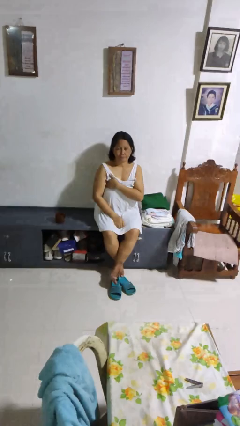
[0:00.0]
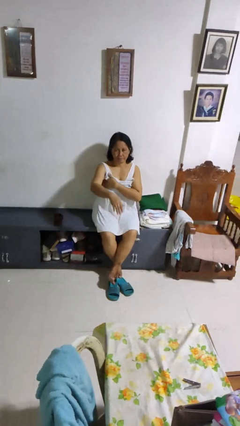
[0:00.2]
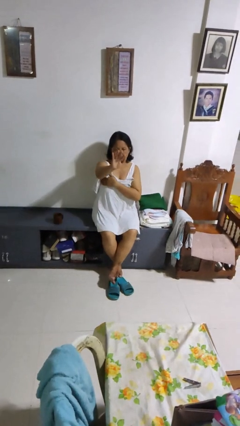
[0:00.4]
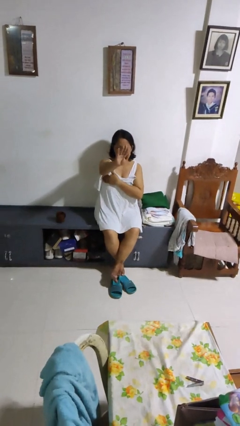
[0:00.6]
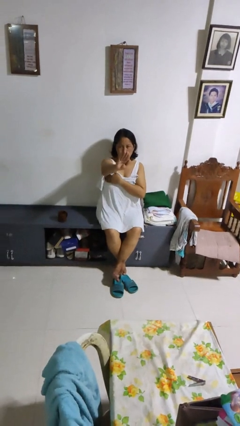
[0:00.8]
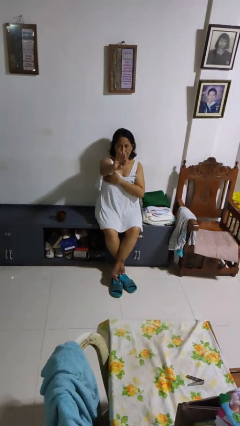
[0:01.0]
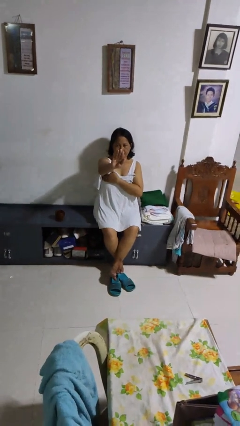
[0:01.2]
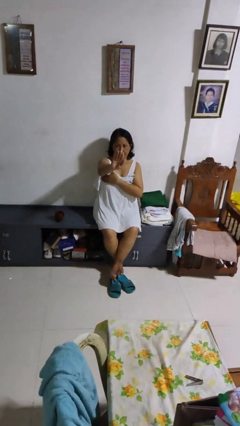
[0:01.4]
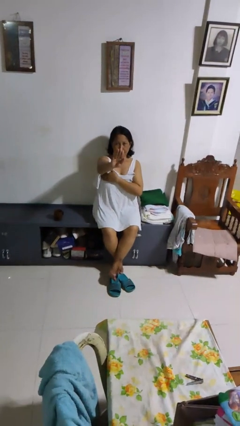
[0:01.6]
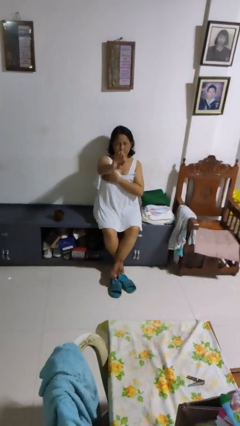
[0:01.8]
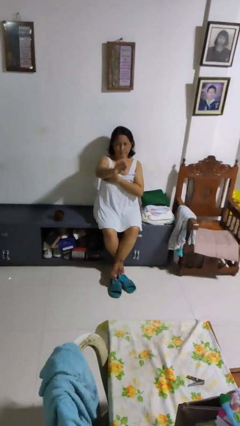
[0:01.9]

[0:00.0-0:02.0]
person gestures stop

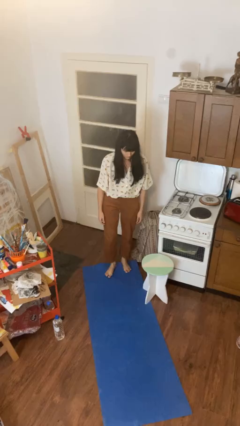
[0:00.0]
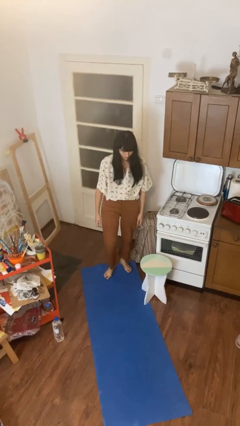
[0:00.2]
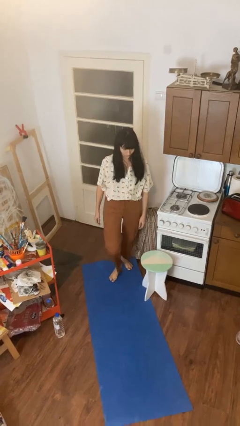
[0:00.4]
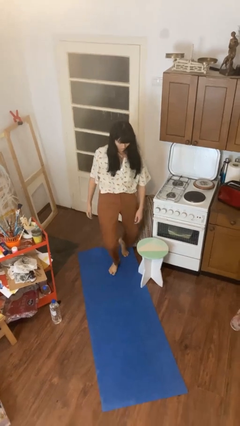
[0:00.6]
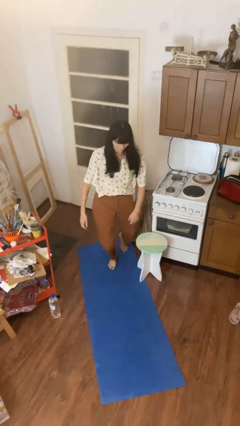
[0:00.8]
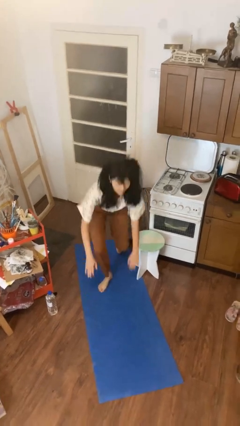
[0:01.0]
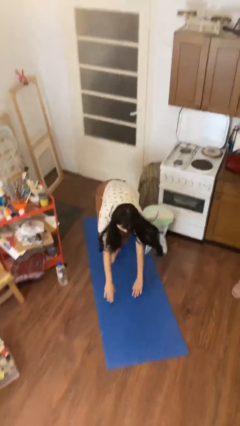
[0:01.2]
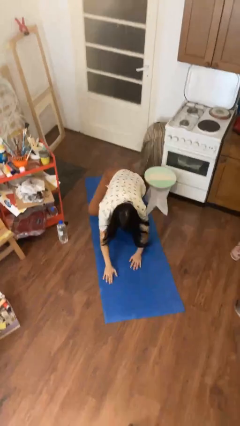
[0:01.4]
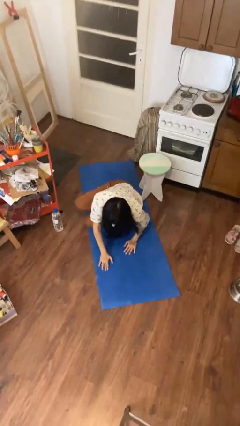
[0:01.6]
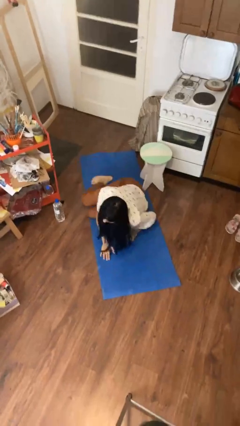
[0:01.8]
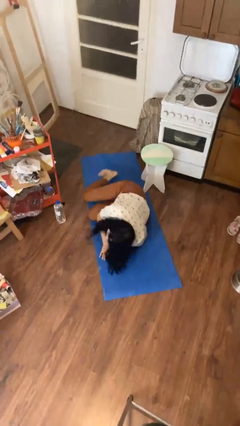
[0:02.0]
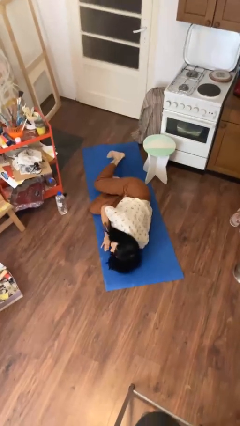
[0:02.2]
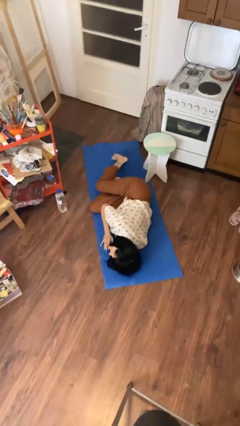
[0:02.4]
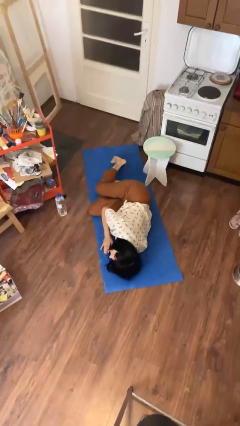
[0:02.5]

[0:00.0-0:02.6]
person trips on object on floor

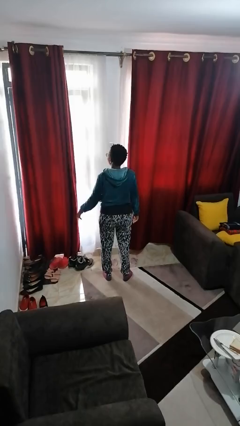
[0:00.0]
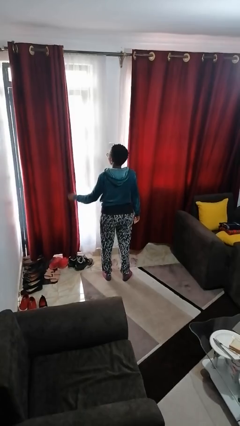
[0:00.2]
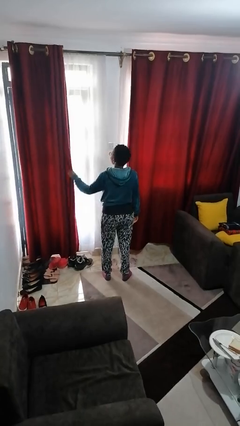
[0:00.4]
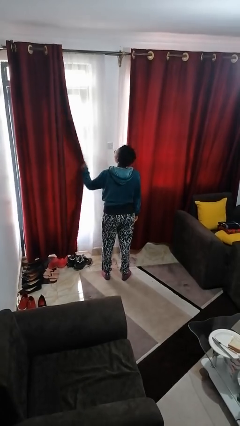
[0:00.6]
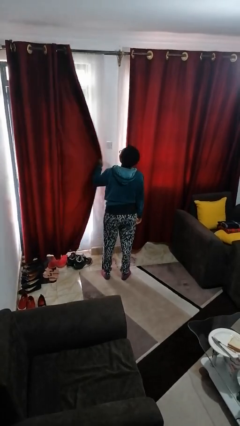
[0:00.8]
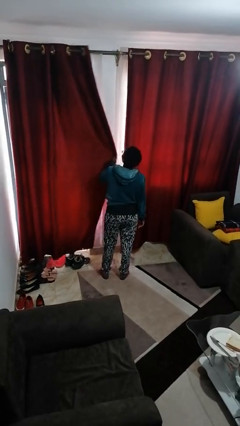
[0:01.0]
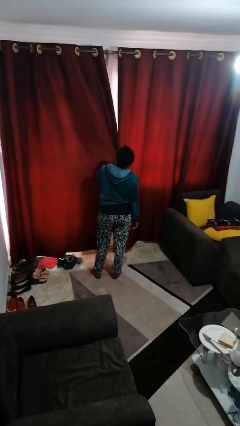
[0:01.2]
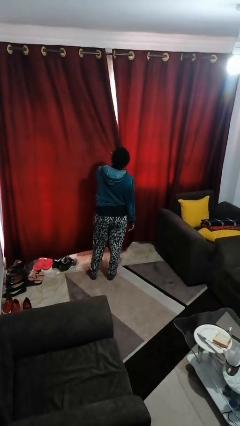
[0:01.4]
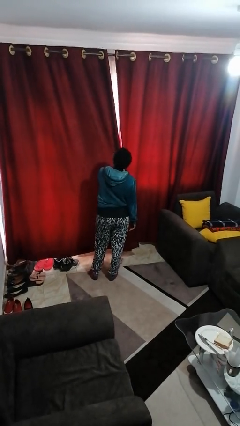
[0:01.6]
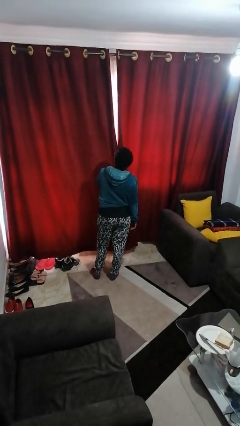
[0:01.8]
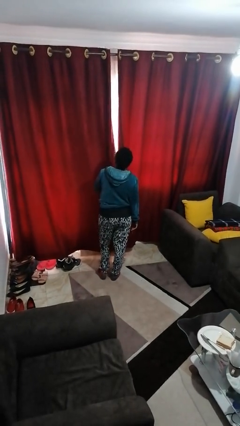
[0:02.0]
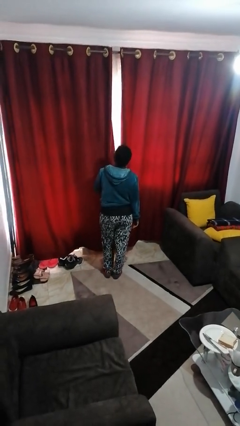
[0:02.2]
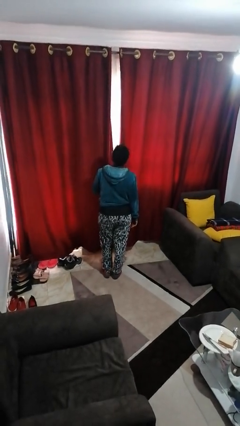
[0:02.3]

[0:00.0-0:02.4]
person closes curtains

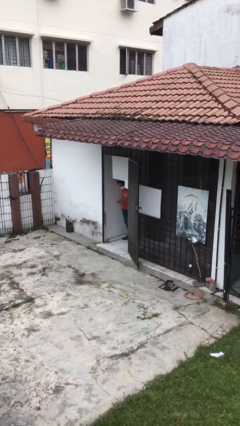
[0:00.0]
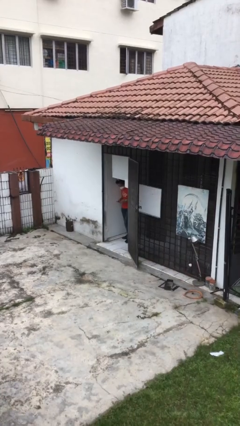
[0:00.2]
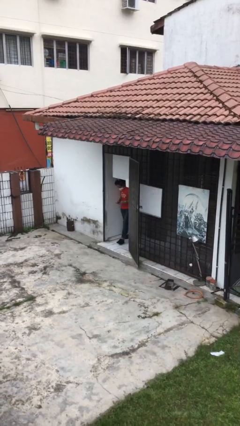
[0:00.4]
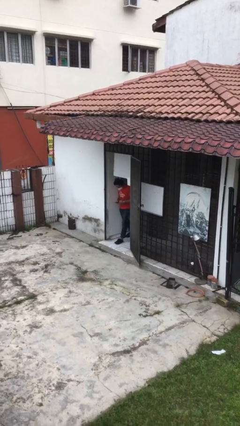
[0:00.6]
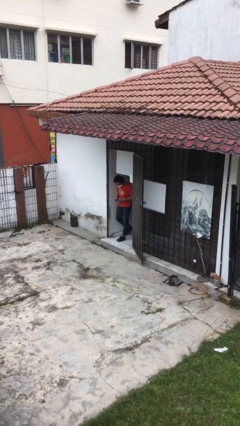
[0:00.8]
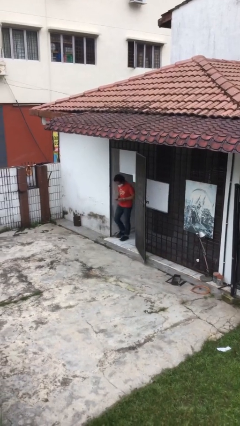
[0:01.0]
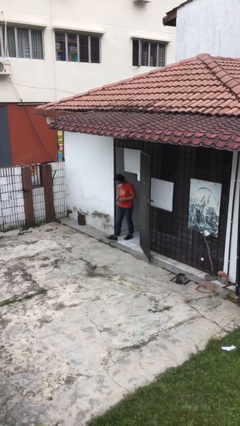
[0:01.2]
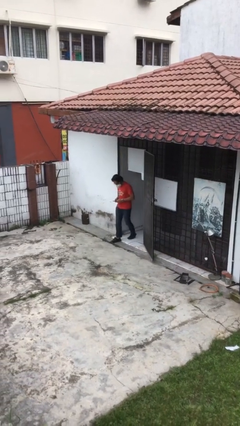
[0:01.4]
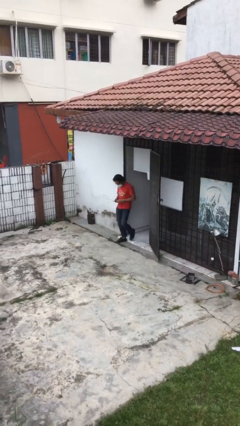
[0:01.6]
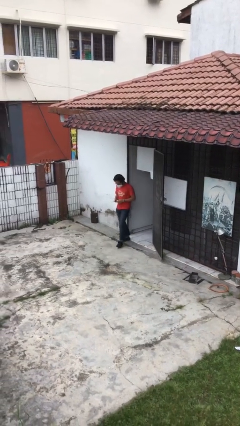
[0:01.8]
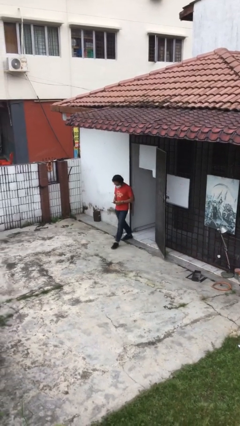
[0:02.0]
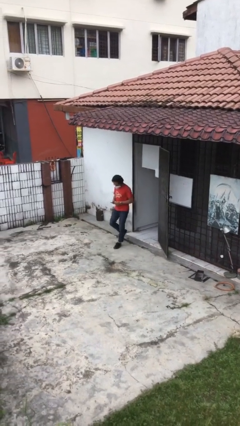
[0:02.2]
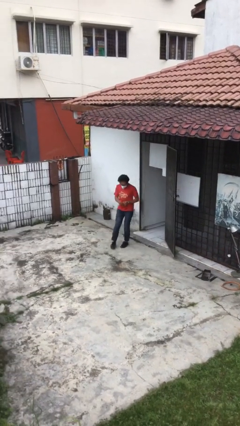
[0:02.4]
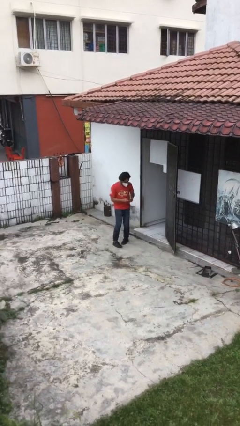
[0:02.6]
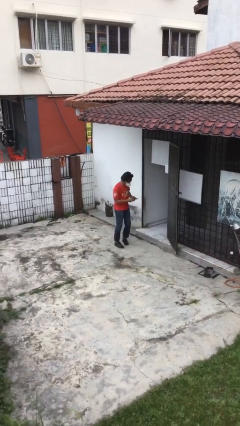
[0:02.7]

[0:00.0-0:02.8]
person enters scene through structure

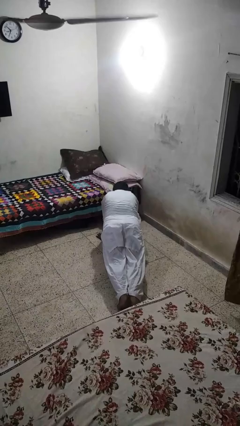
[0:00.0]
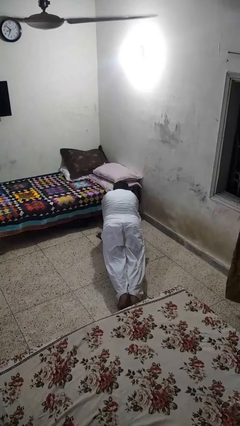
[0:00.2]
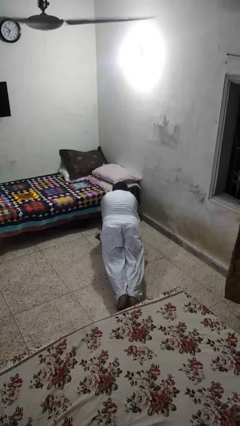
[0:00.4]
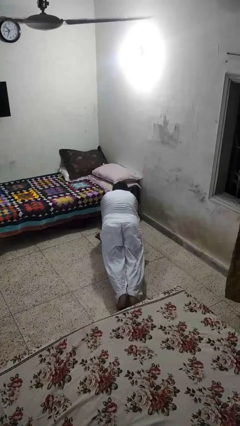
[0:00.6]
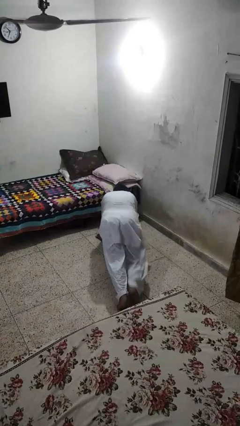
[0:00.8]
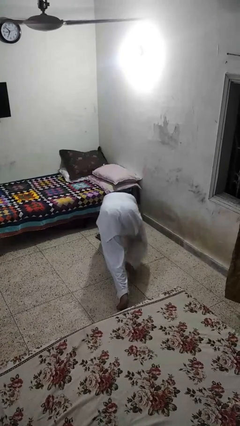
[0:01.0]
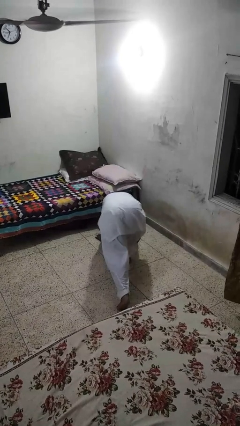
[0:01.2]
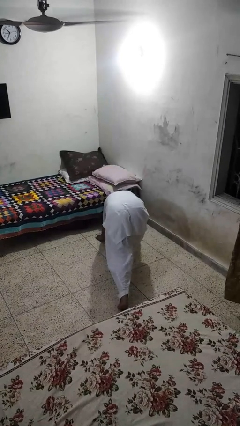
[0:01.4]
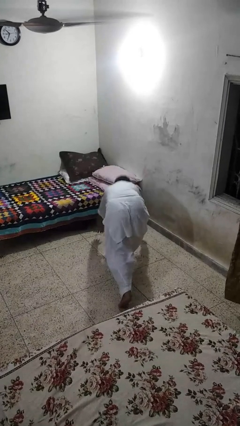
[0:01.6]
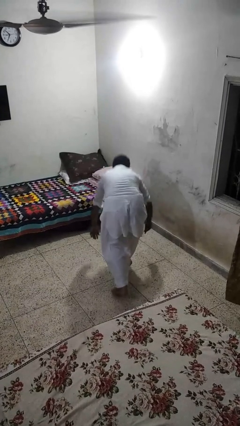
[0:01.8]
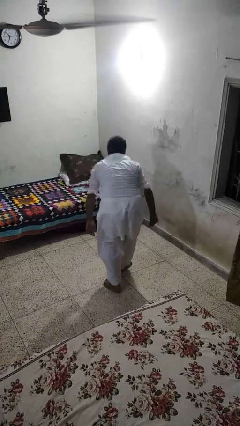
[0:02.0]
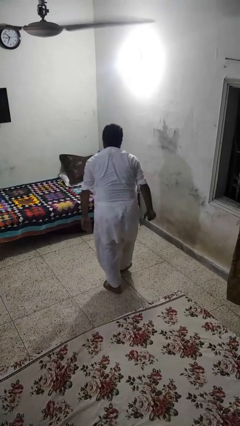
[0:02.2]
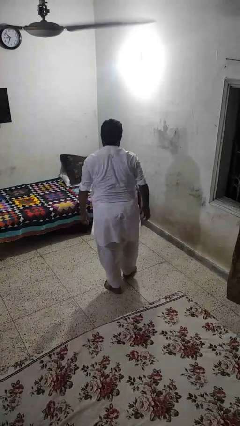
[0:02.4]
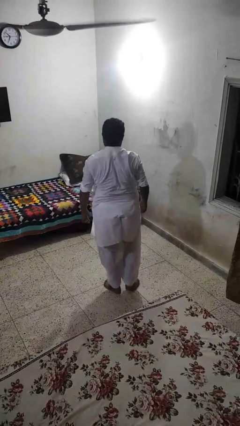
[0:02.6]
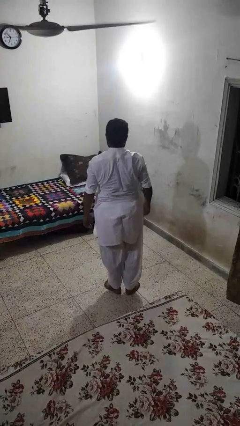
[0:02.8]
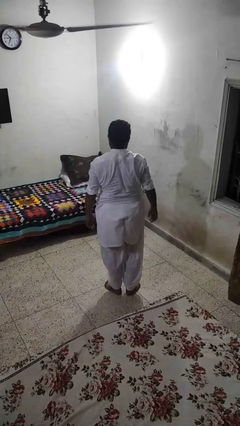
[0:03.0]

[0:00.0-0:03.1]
person stands up from floor

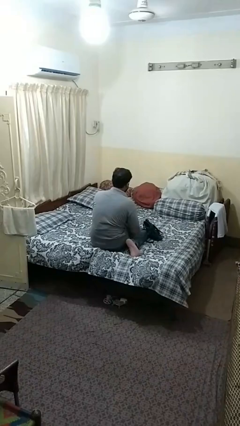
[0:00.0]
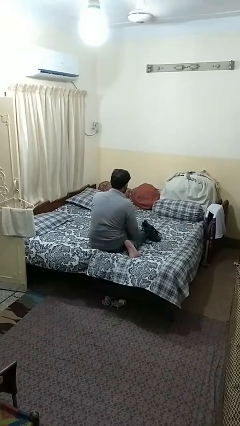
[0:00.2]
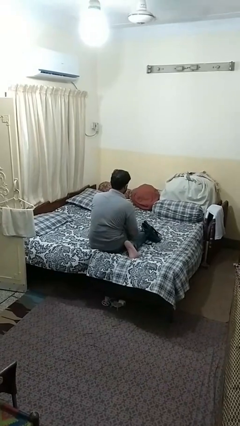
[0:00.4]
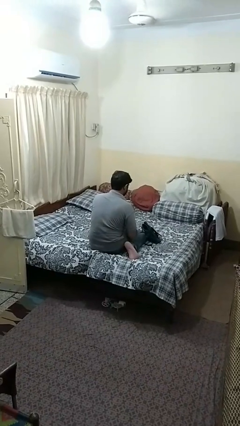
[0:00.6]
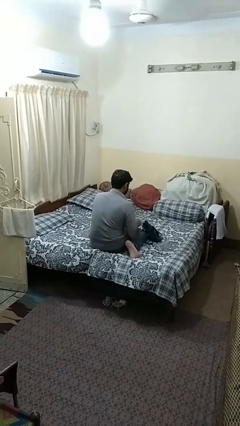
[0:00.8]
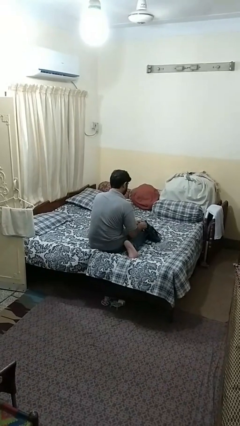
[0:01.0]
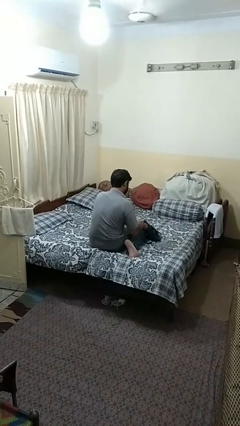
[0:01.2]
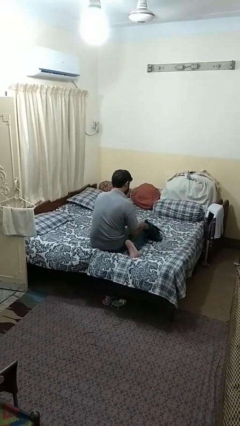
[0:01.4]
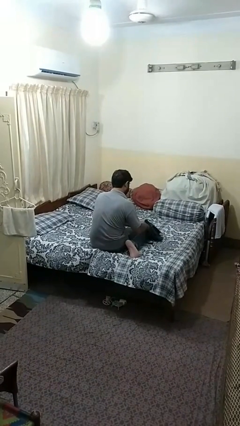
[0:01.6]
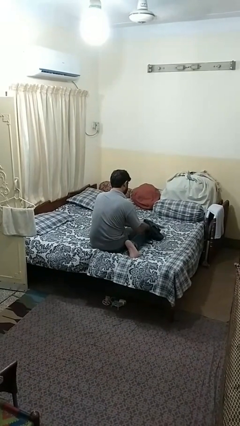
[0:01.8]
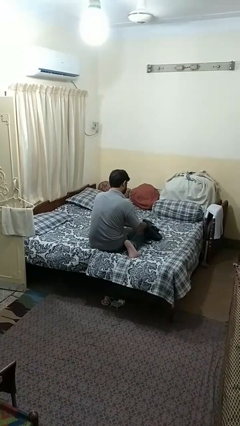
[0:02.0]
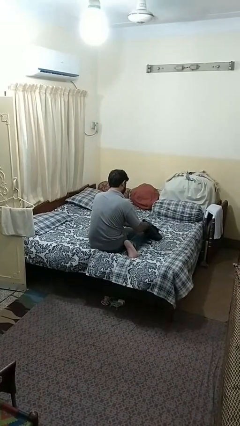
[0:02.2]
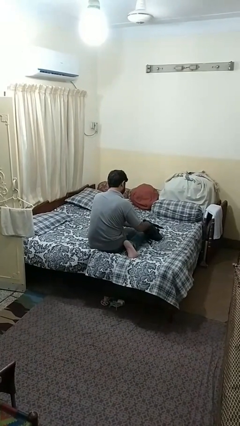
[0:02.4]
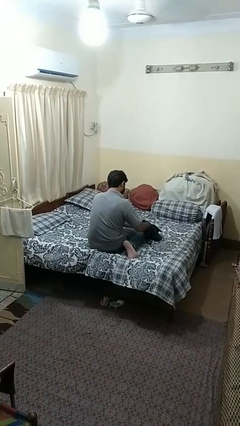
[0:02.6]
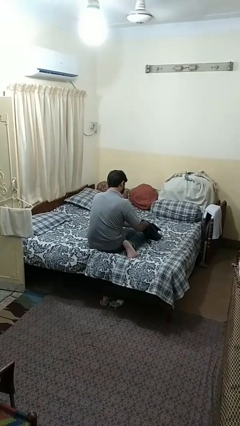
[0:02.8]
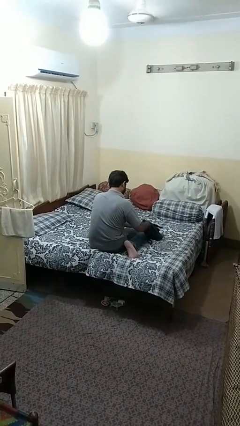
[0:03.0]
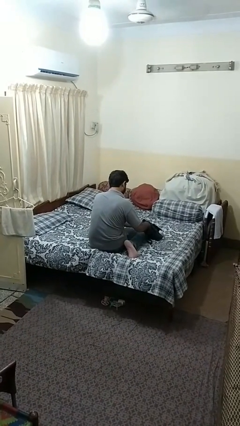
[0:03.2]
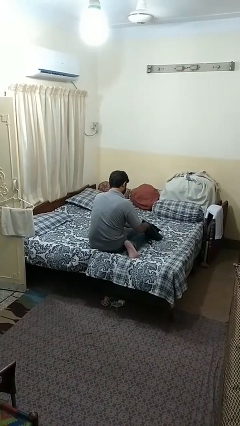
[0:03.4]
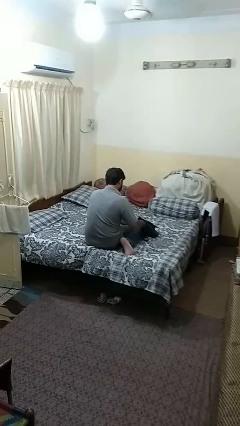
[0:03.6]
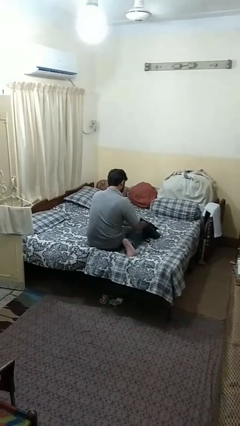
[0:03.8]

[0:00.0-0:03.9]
person searches in purse

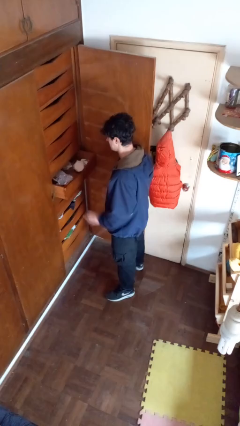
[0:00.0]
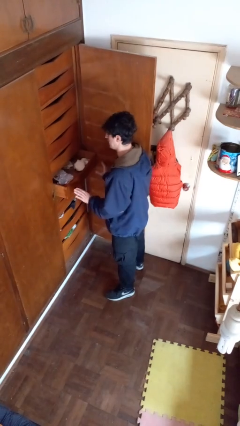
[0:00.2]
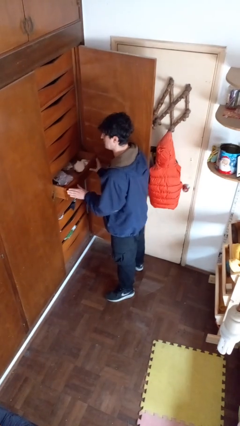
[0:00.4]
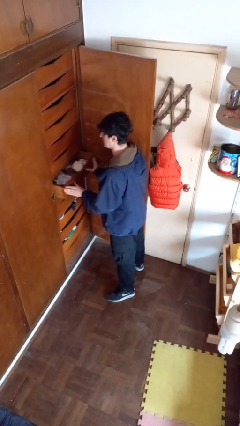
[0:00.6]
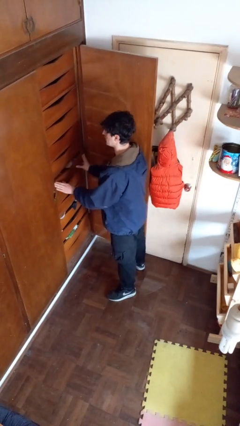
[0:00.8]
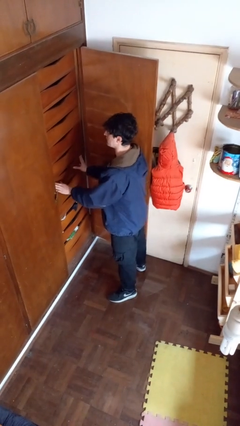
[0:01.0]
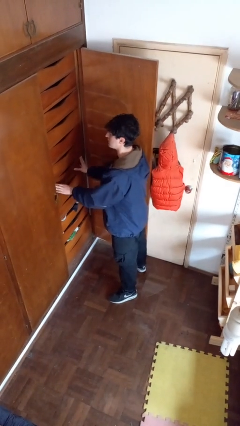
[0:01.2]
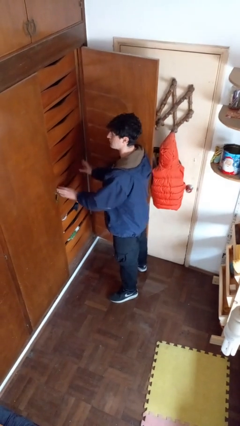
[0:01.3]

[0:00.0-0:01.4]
person closes dresser drawer
